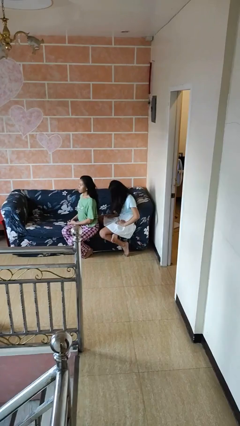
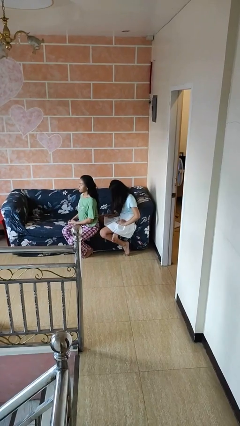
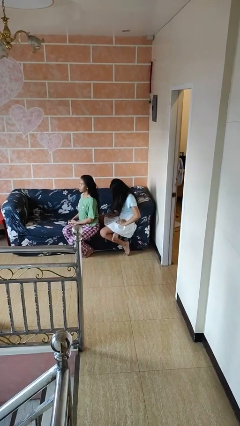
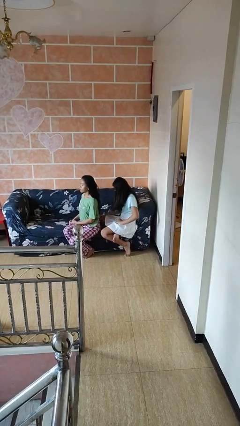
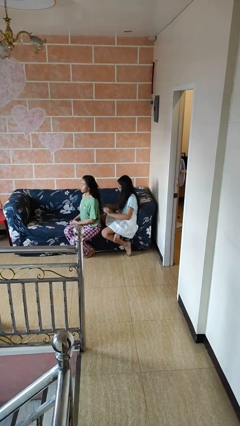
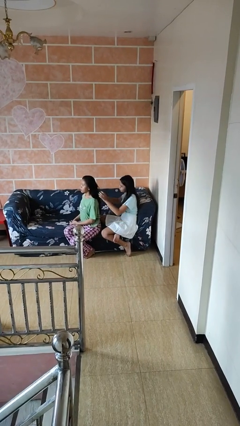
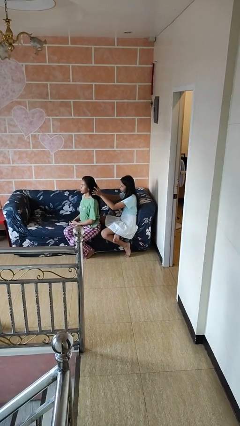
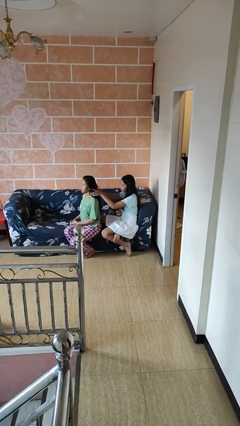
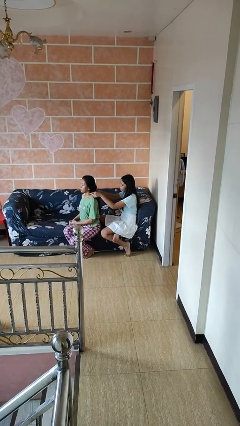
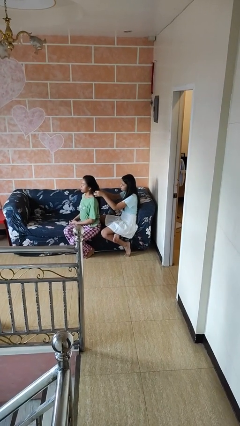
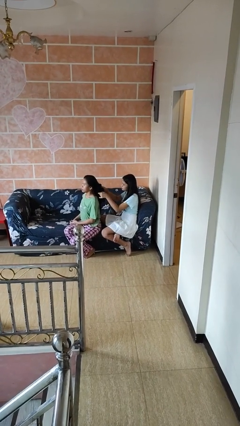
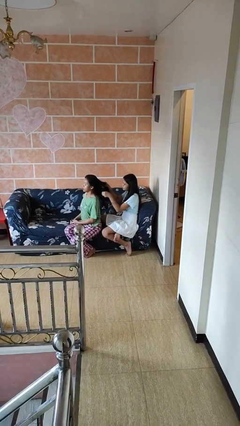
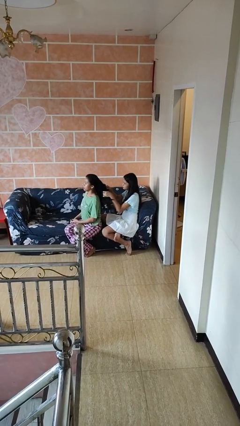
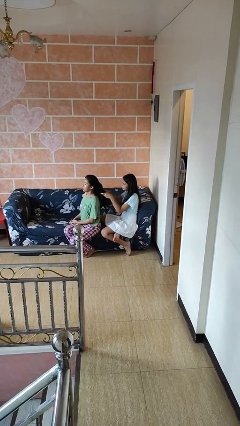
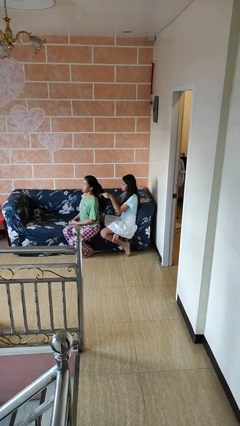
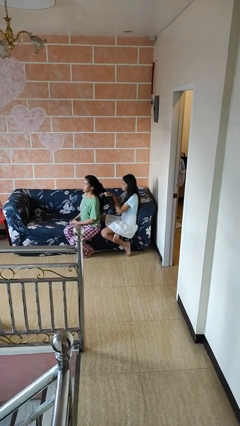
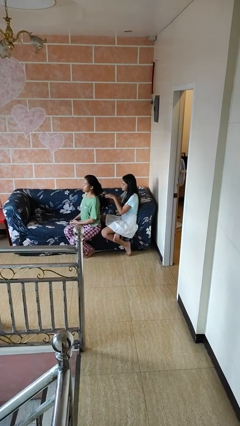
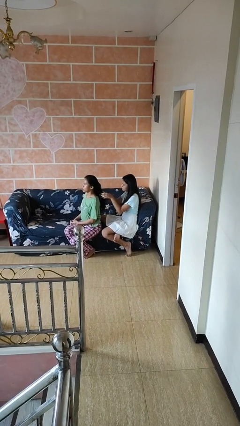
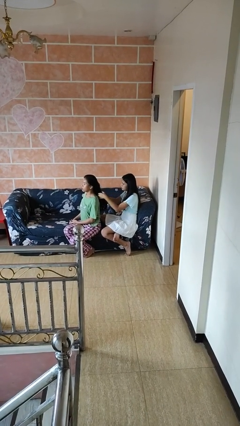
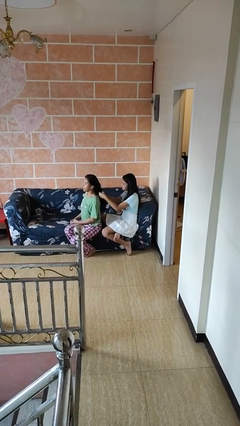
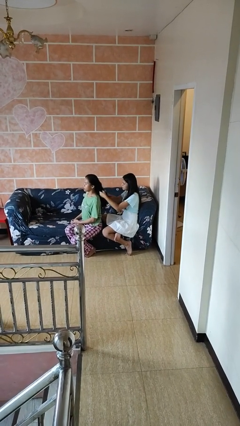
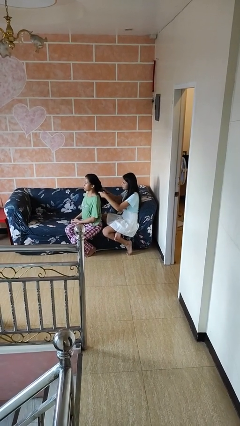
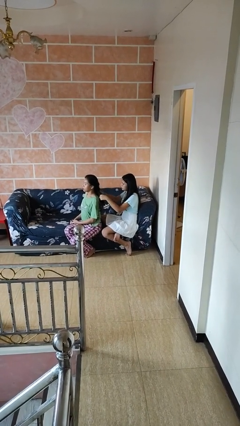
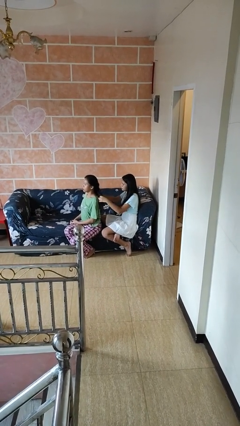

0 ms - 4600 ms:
person braids hair of person

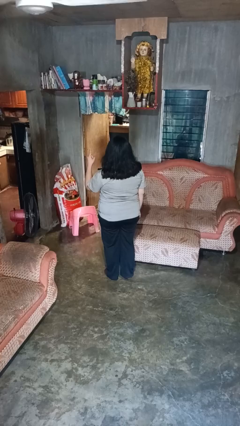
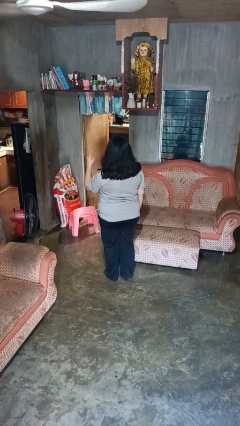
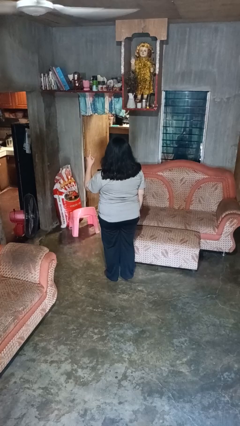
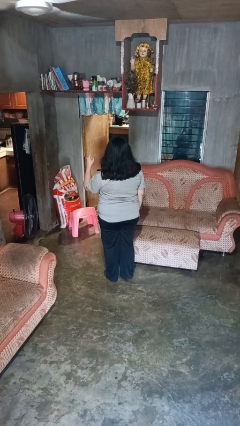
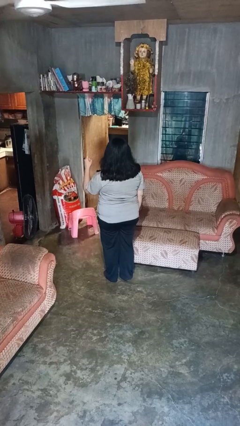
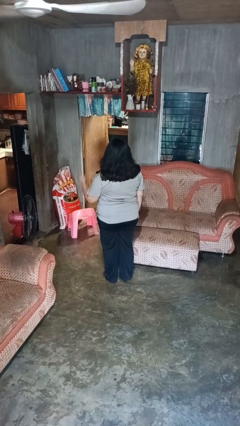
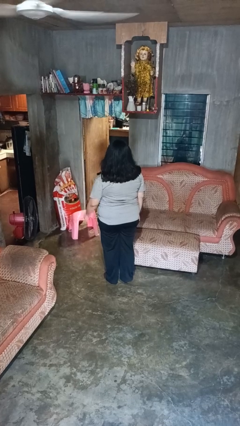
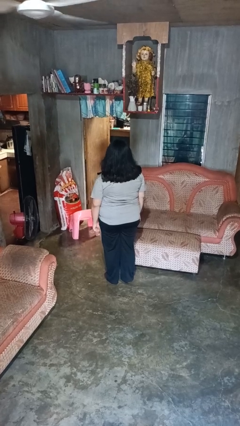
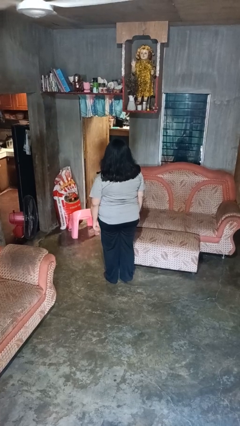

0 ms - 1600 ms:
person gestures number one

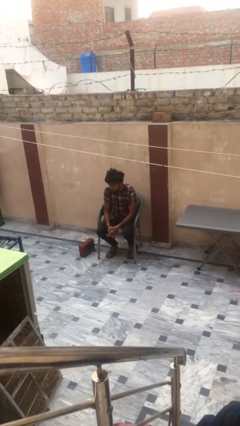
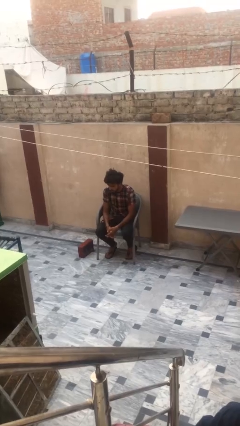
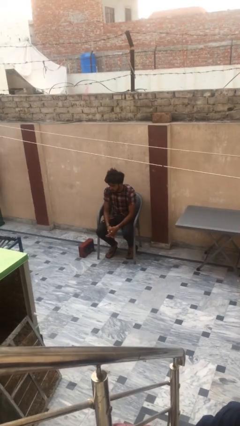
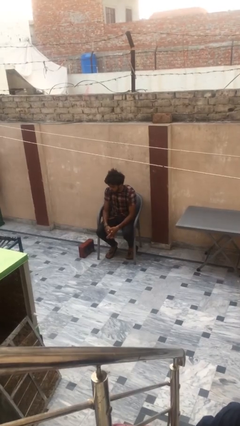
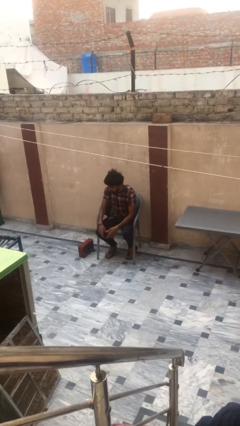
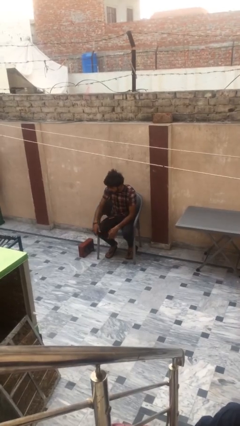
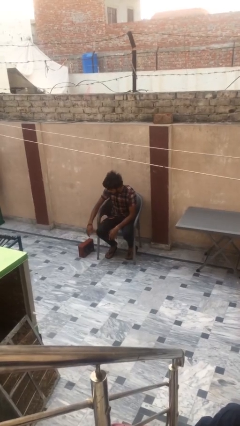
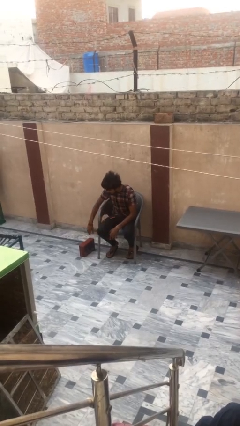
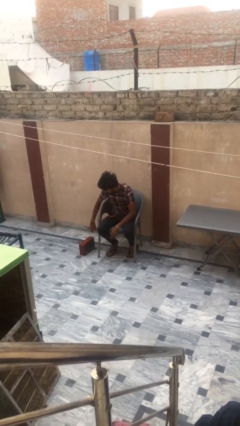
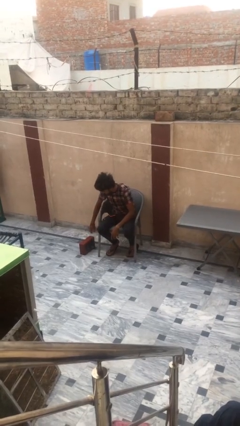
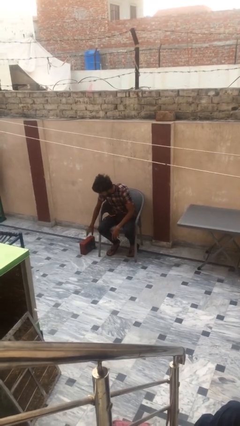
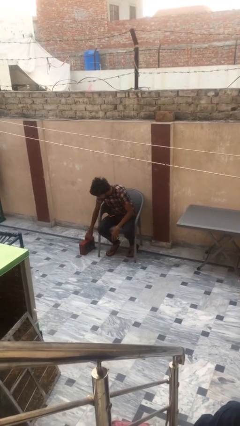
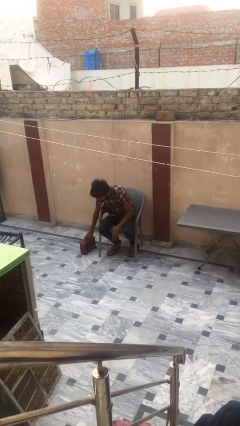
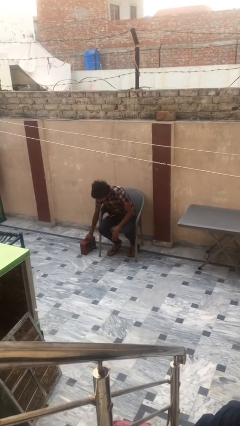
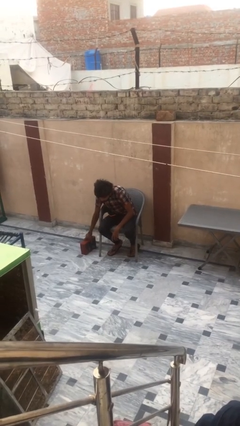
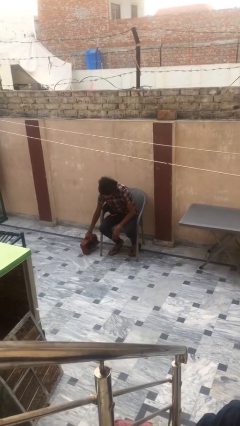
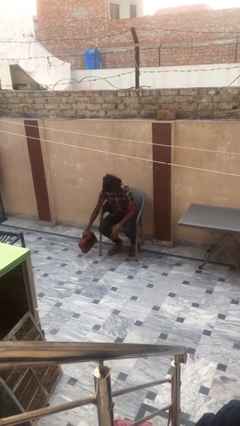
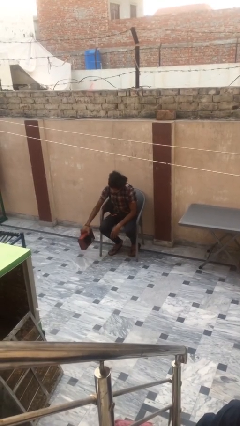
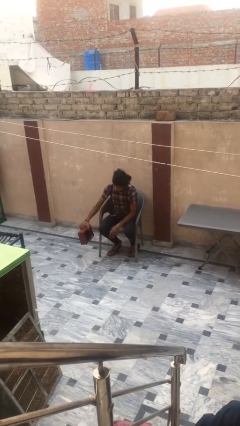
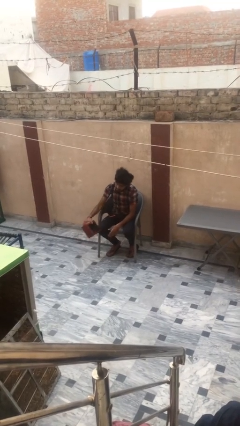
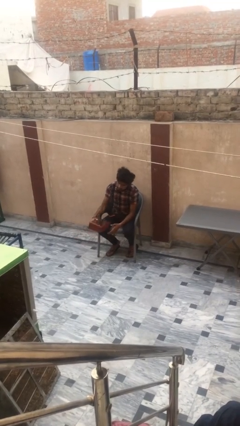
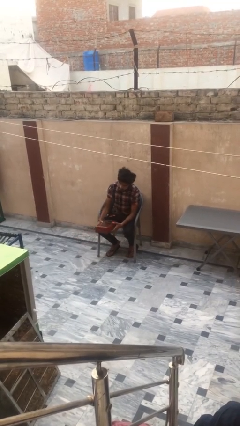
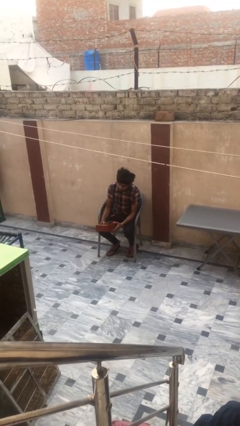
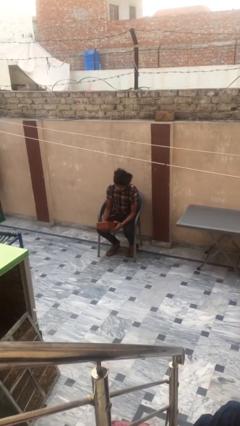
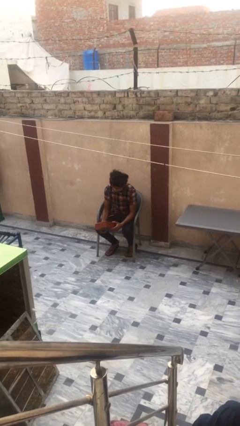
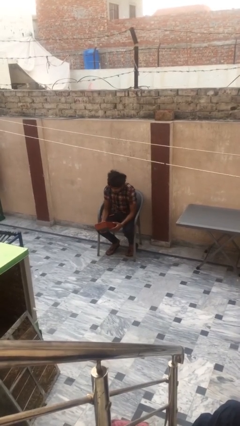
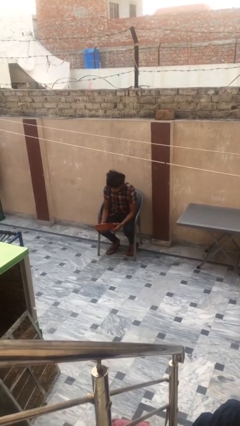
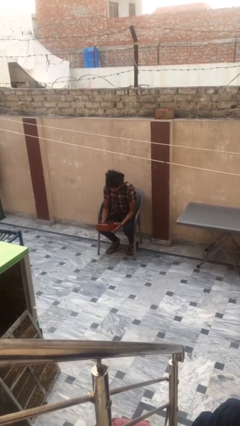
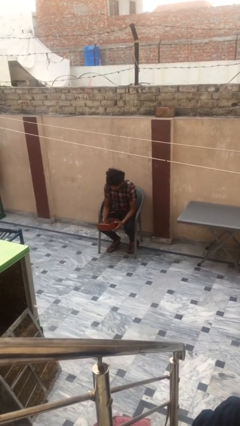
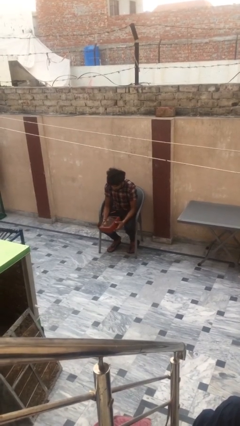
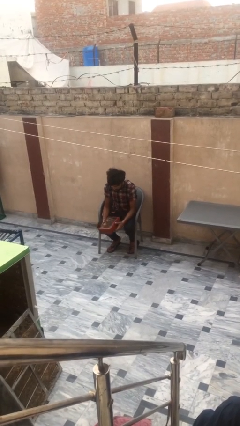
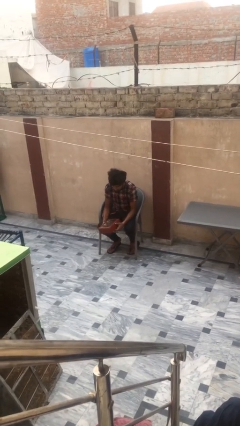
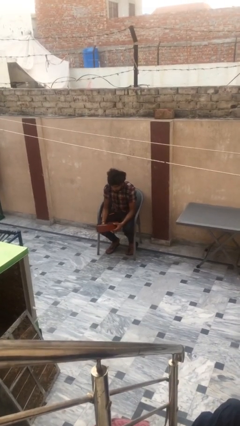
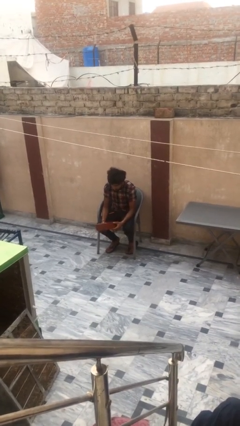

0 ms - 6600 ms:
person picks up object from floor

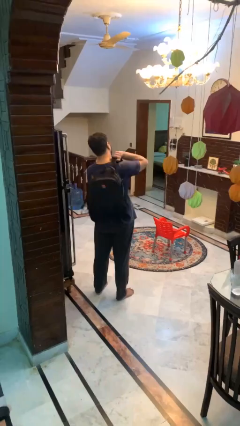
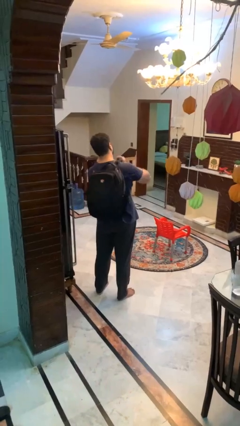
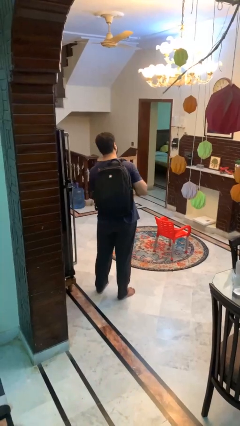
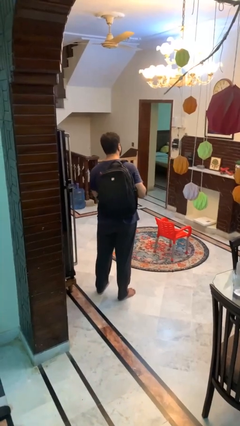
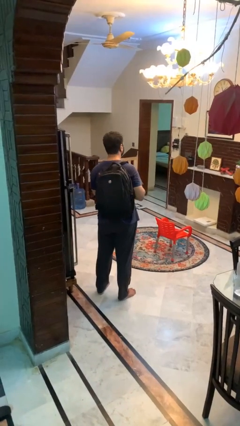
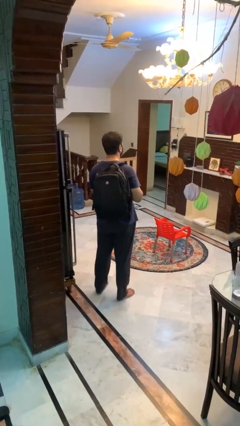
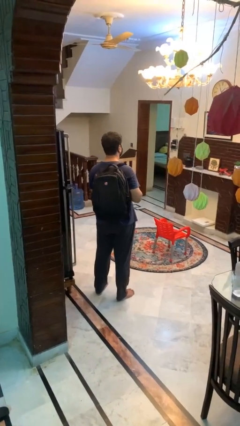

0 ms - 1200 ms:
person puts on backpack

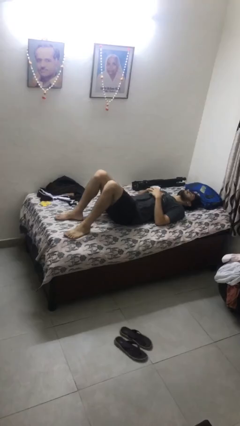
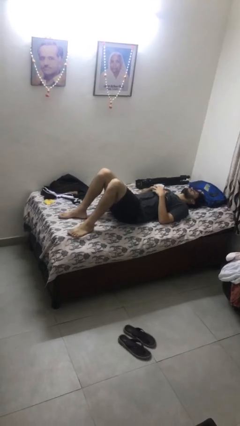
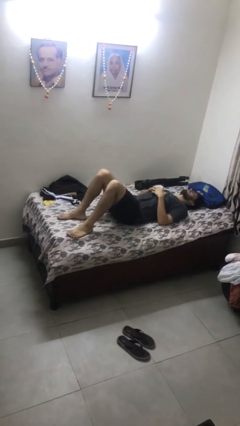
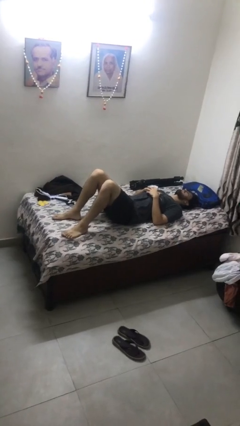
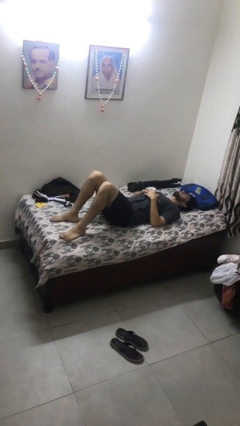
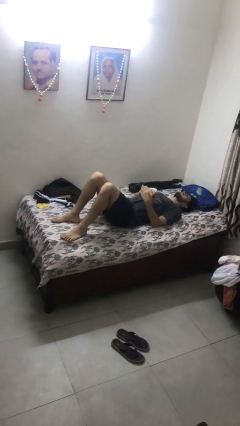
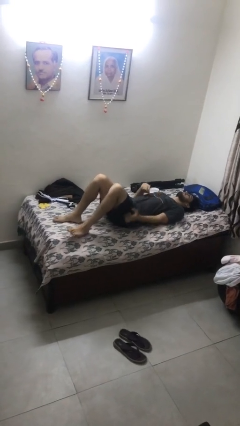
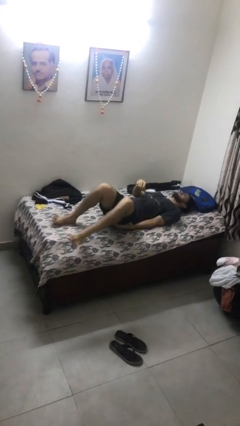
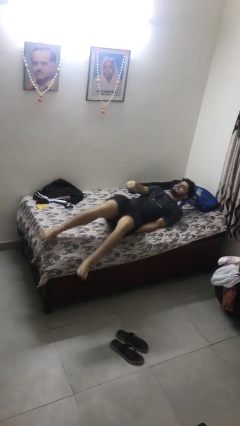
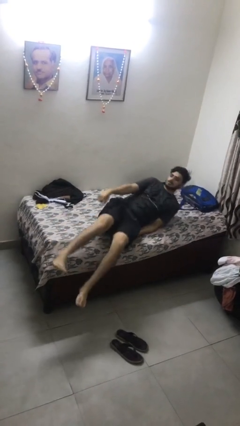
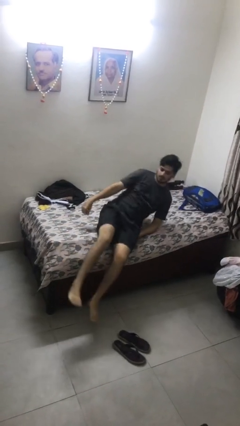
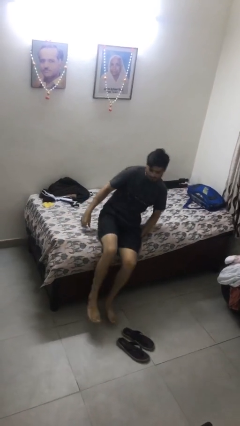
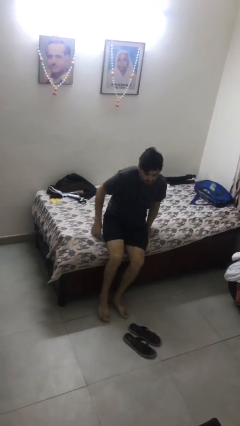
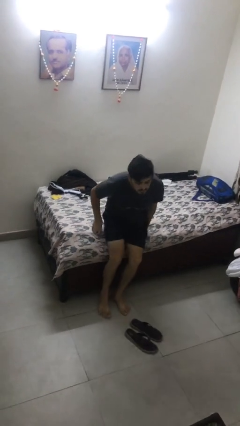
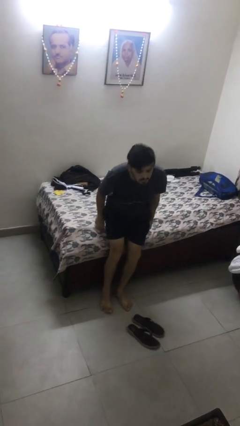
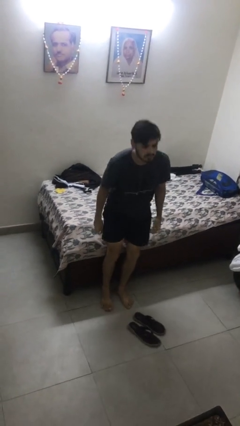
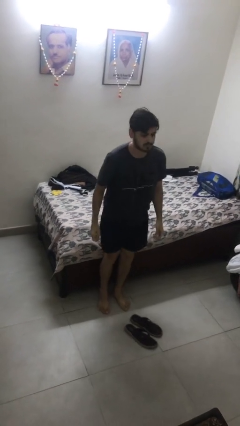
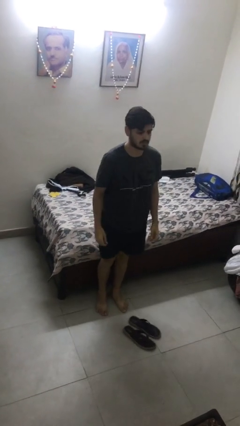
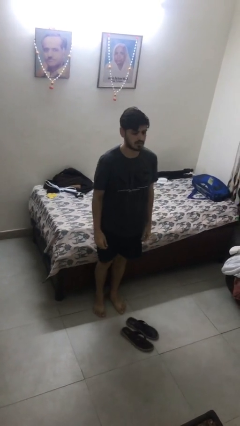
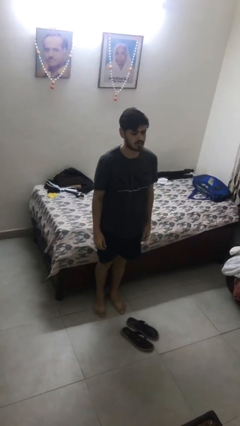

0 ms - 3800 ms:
person stands up
